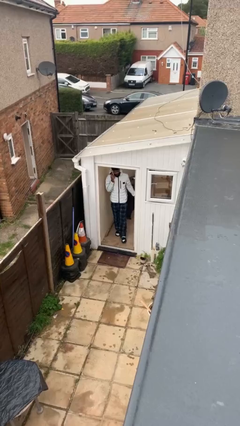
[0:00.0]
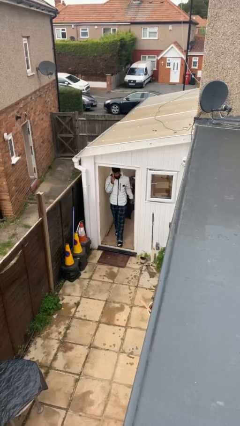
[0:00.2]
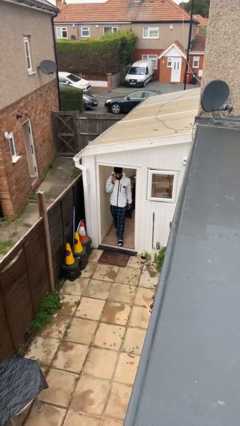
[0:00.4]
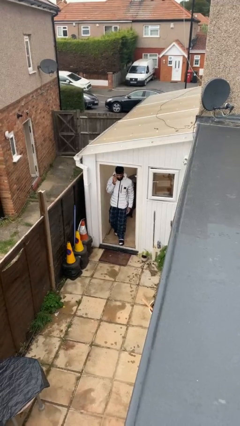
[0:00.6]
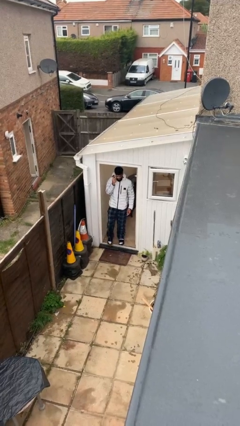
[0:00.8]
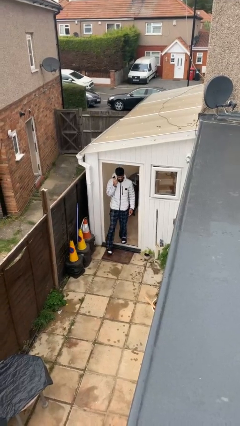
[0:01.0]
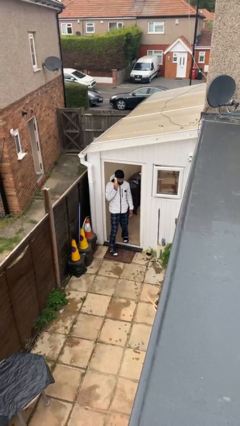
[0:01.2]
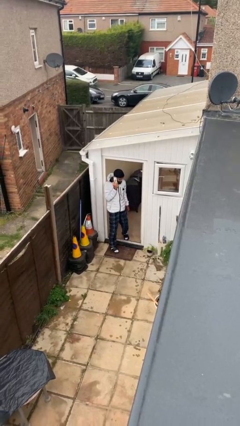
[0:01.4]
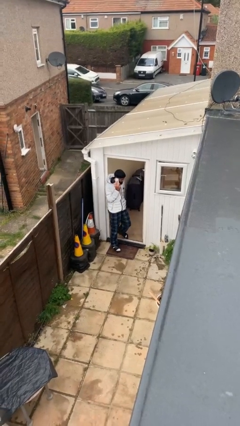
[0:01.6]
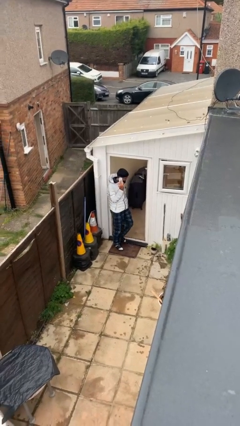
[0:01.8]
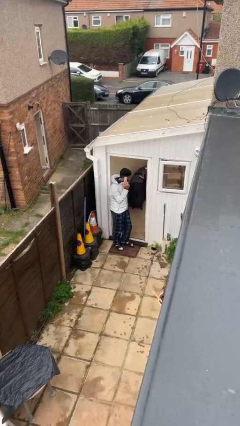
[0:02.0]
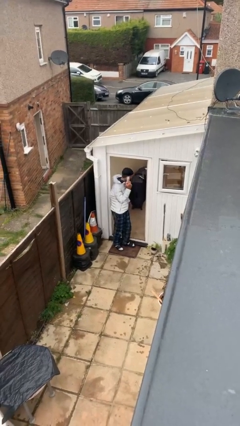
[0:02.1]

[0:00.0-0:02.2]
person enters scene through structure

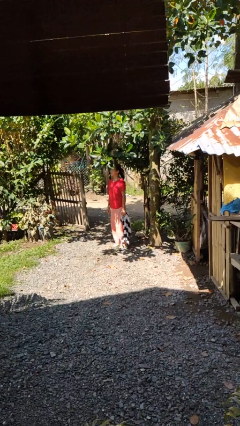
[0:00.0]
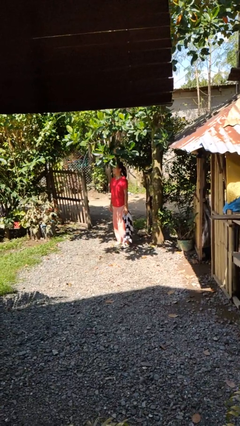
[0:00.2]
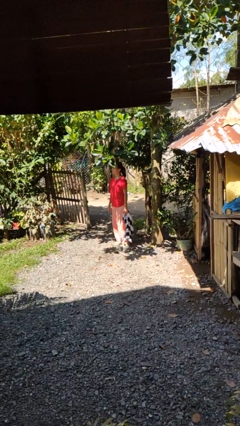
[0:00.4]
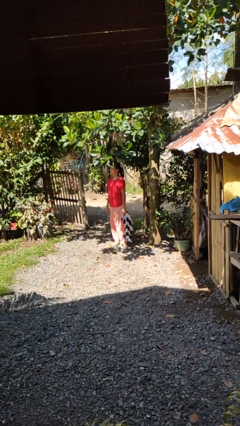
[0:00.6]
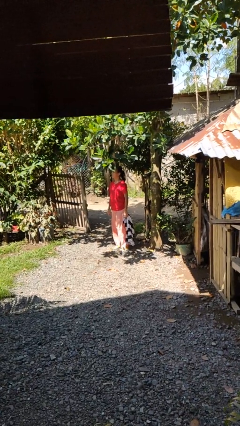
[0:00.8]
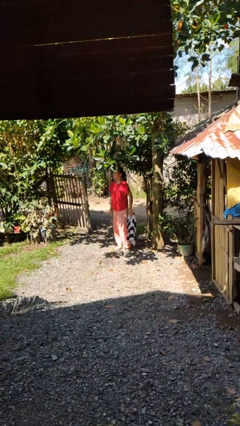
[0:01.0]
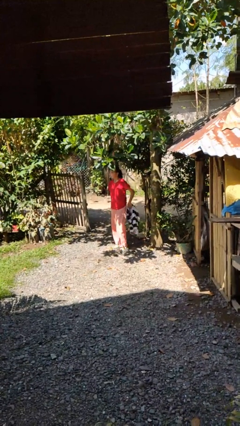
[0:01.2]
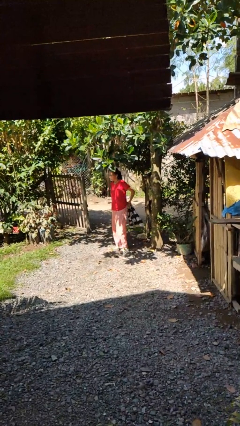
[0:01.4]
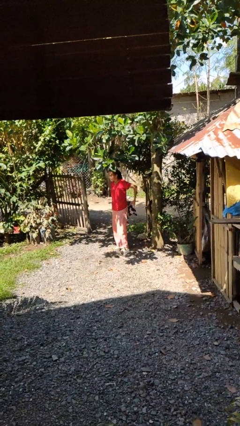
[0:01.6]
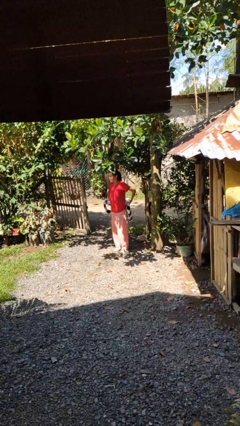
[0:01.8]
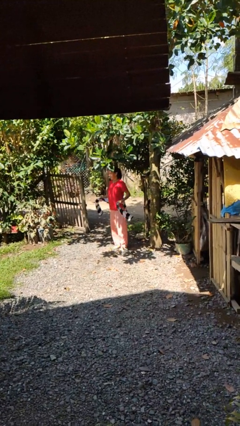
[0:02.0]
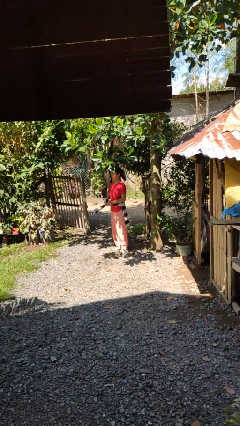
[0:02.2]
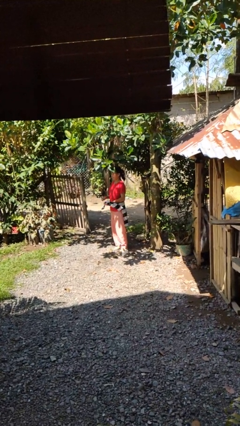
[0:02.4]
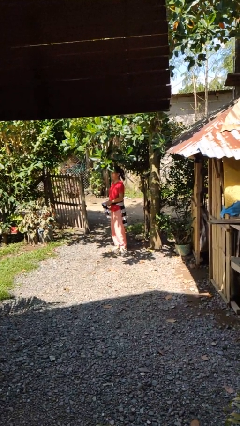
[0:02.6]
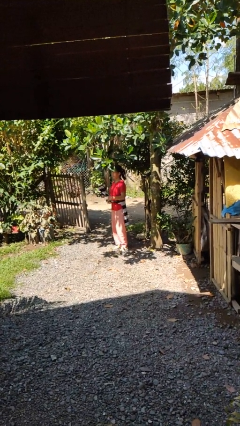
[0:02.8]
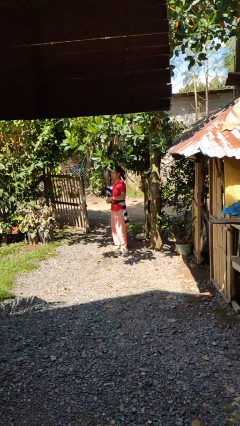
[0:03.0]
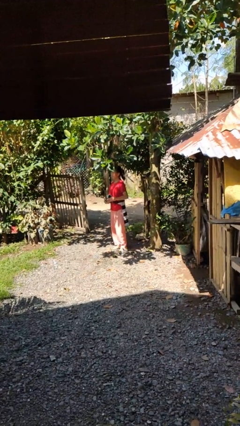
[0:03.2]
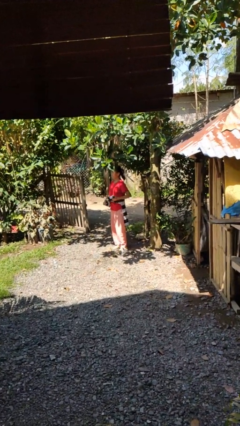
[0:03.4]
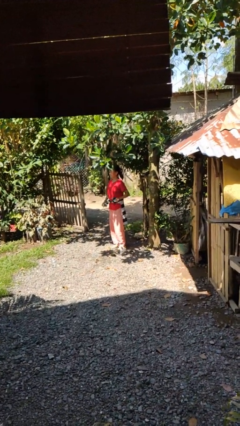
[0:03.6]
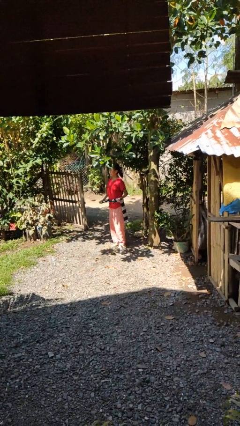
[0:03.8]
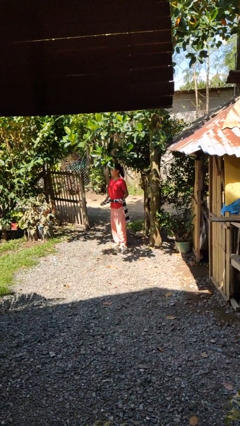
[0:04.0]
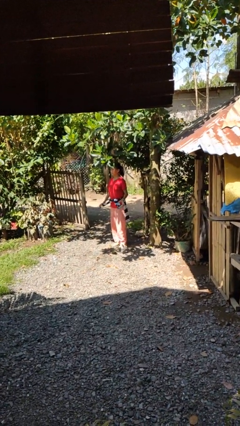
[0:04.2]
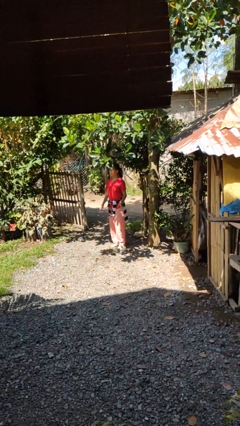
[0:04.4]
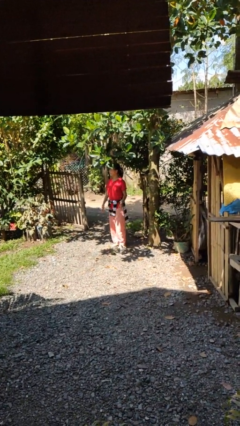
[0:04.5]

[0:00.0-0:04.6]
person ties jacket around waist

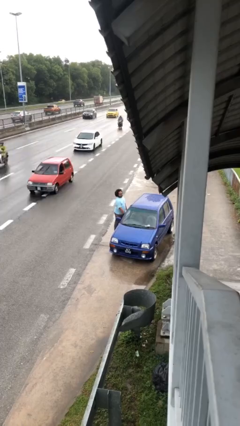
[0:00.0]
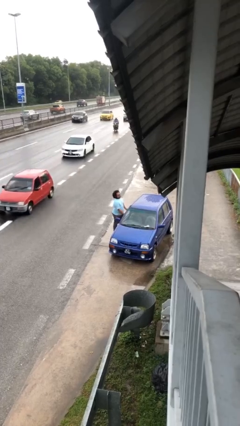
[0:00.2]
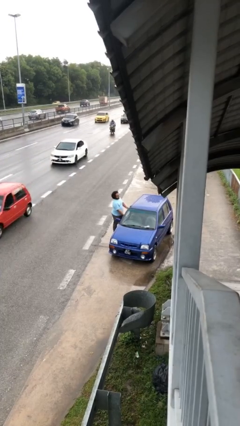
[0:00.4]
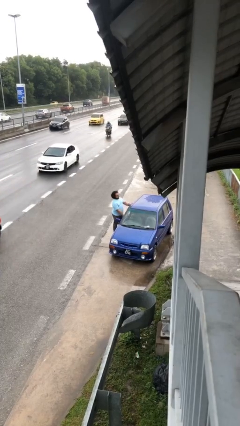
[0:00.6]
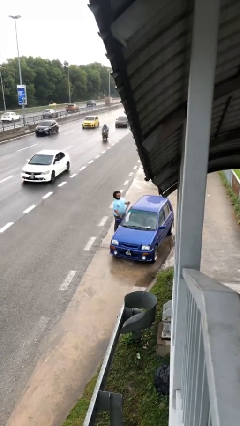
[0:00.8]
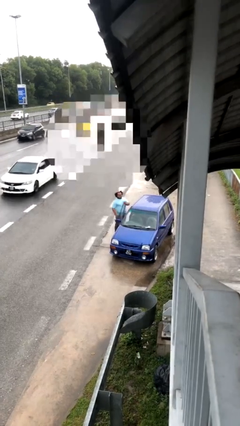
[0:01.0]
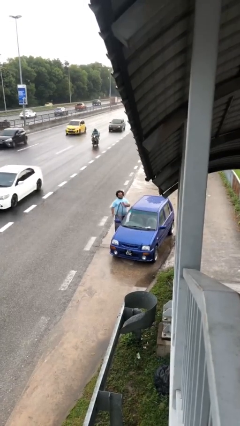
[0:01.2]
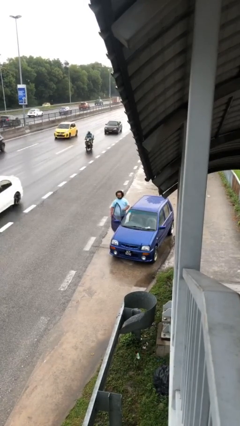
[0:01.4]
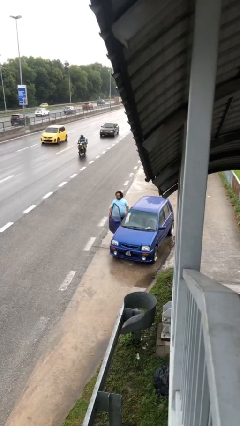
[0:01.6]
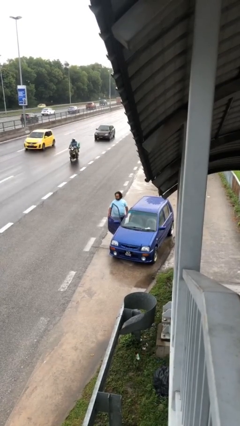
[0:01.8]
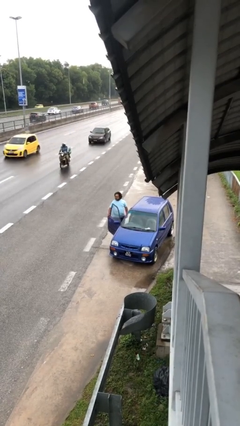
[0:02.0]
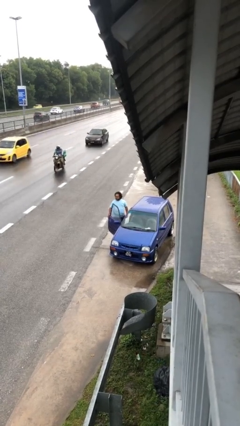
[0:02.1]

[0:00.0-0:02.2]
person opens car door

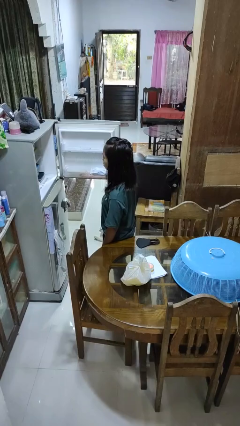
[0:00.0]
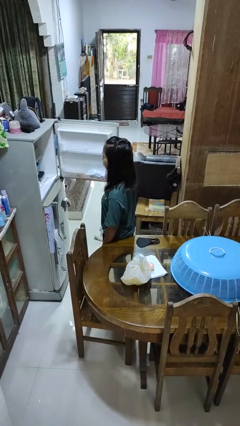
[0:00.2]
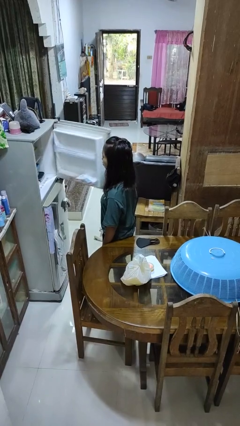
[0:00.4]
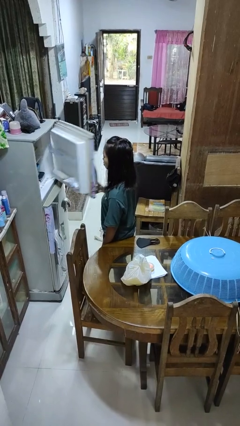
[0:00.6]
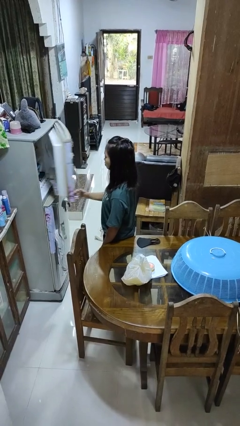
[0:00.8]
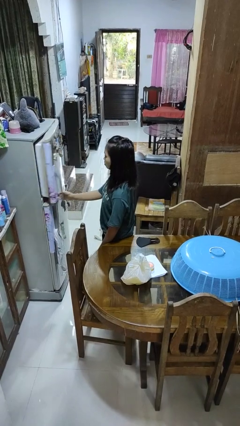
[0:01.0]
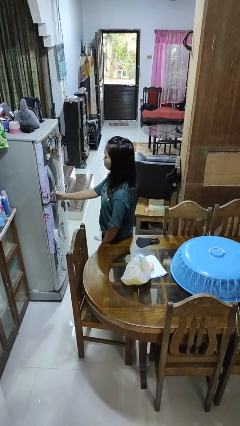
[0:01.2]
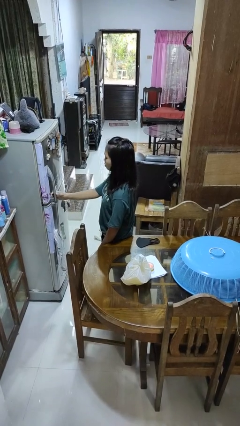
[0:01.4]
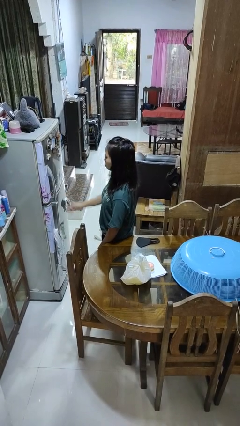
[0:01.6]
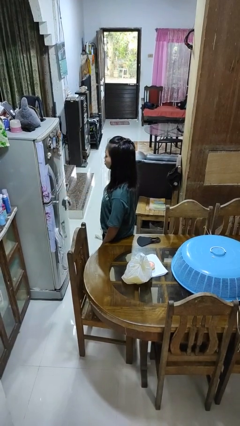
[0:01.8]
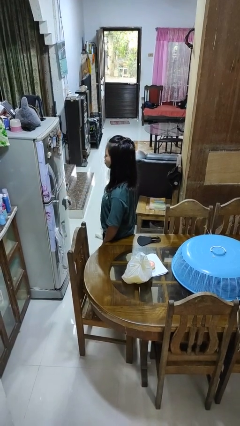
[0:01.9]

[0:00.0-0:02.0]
person closes refrigerator

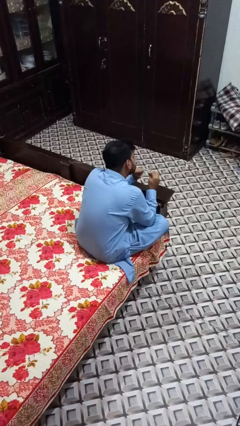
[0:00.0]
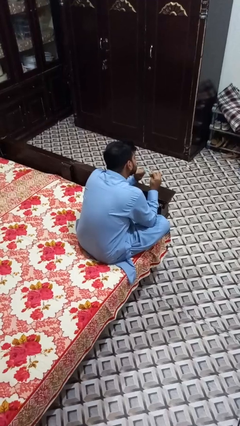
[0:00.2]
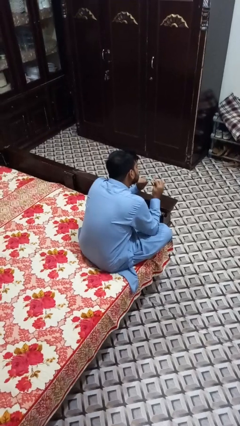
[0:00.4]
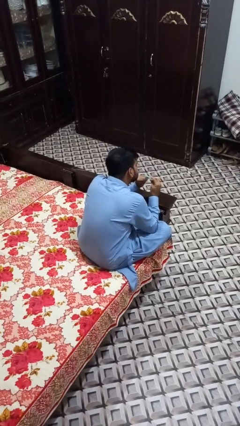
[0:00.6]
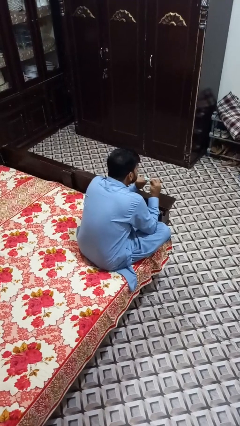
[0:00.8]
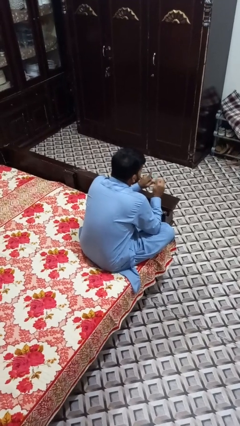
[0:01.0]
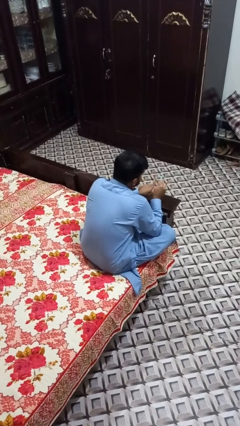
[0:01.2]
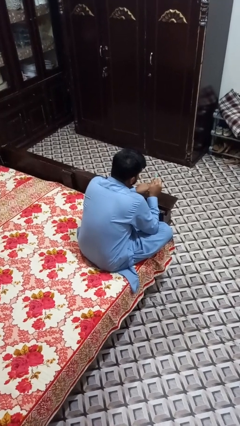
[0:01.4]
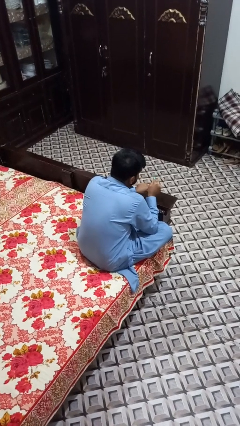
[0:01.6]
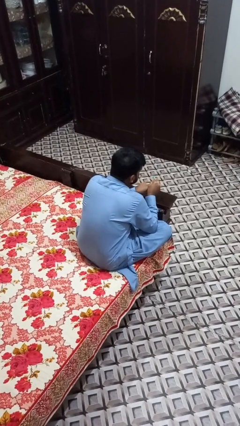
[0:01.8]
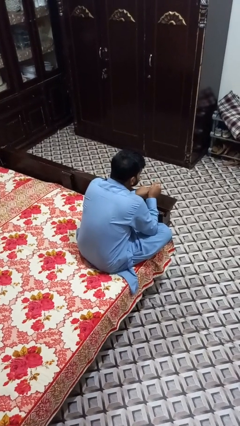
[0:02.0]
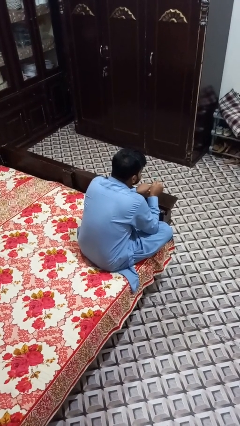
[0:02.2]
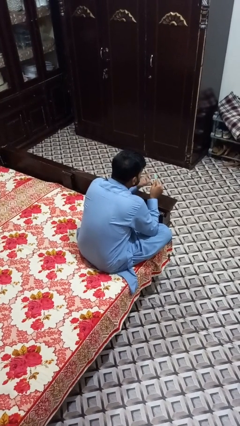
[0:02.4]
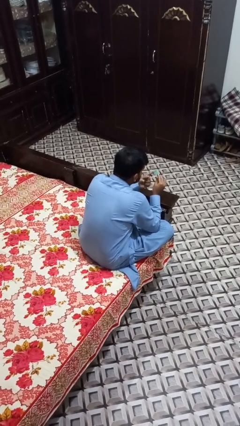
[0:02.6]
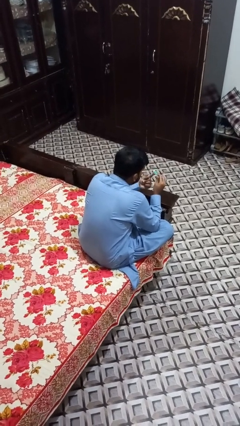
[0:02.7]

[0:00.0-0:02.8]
person files fingernails

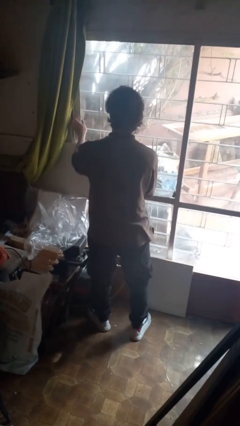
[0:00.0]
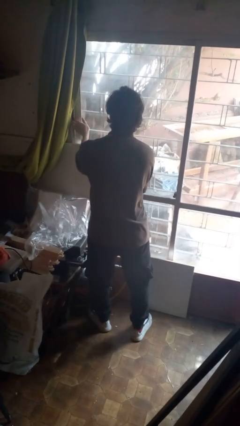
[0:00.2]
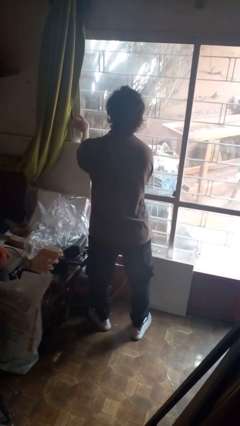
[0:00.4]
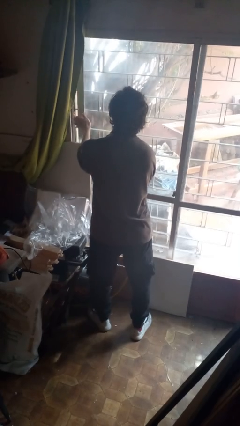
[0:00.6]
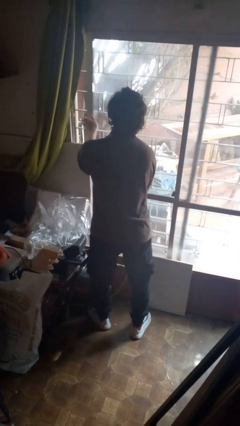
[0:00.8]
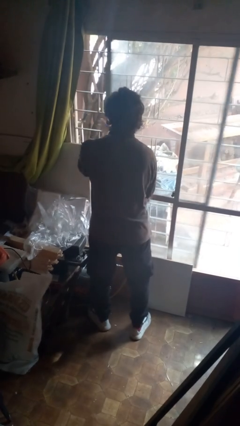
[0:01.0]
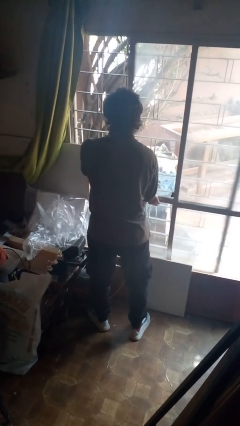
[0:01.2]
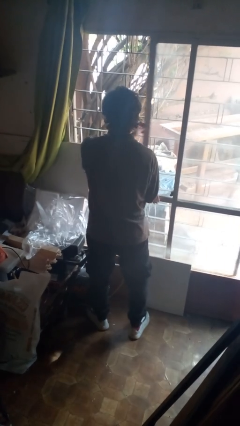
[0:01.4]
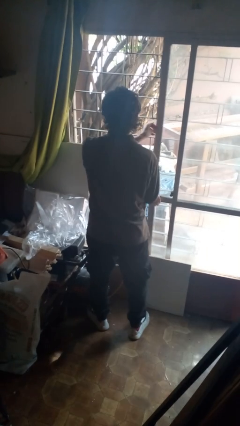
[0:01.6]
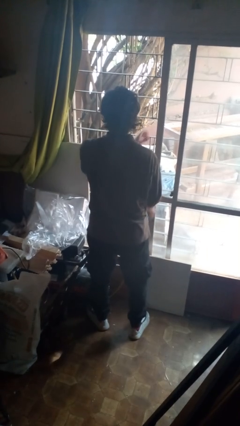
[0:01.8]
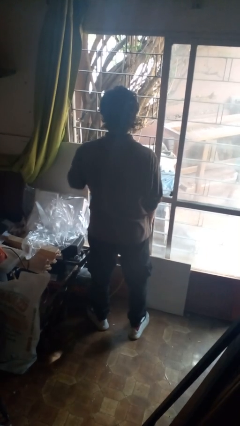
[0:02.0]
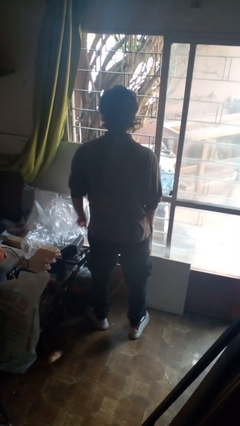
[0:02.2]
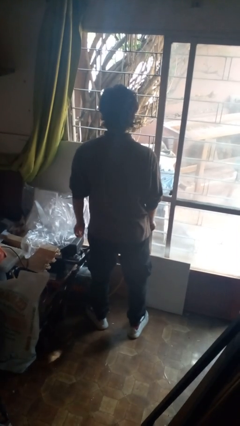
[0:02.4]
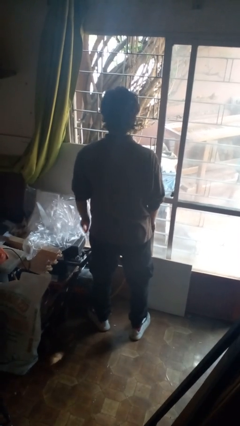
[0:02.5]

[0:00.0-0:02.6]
person opens sliding door

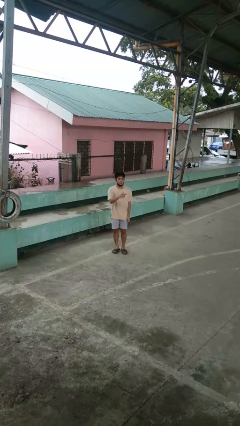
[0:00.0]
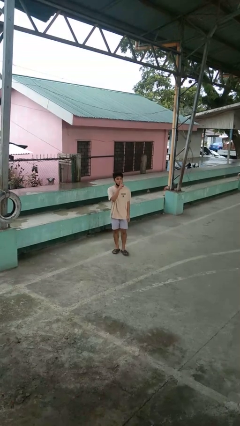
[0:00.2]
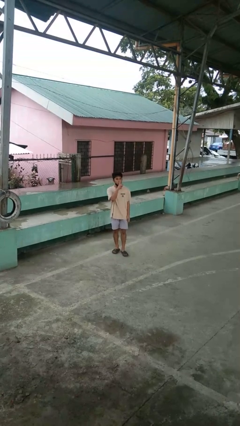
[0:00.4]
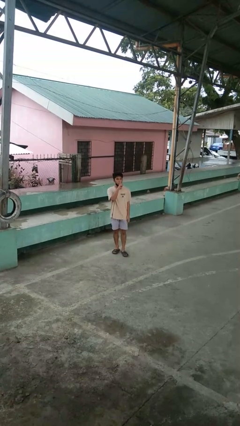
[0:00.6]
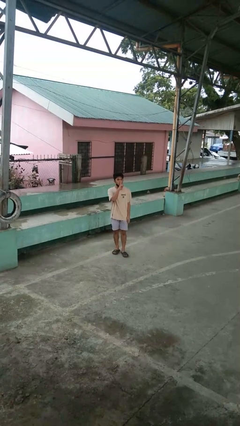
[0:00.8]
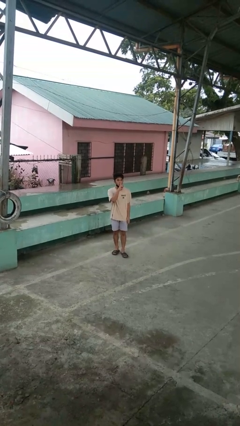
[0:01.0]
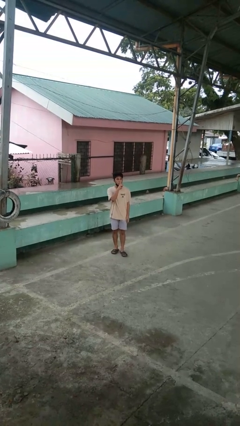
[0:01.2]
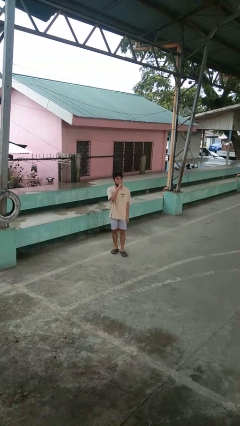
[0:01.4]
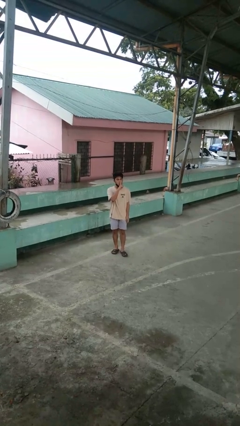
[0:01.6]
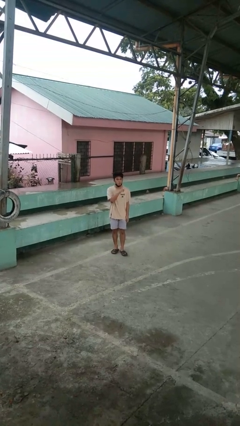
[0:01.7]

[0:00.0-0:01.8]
person gestures be quiet
